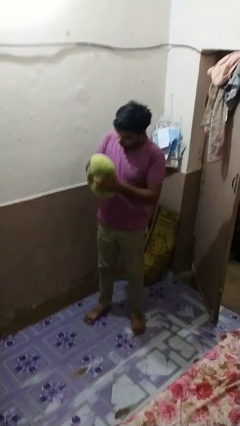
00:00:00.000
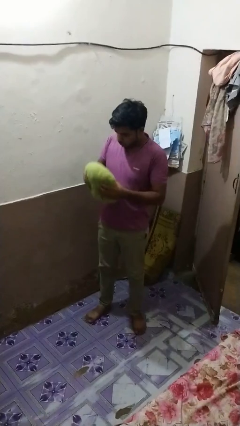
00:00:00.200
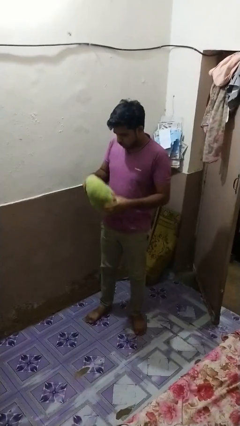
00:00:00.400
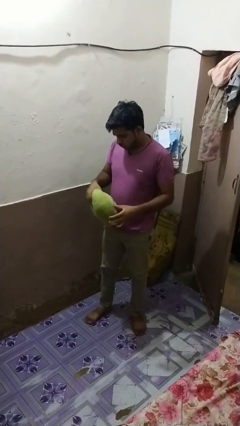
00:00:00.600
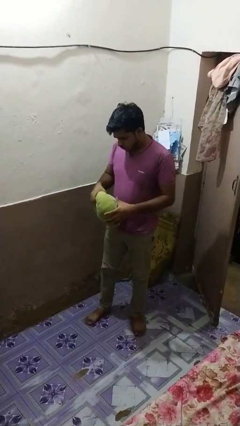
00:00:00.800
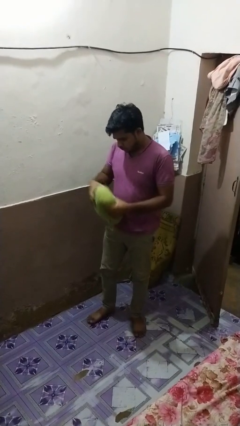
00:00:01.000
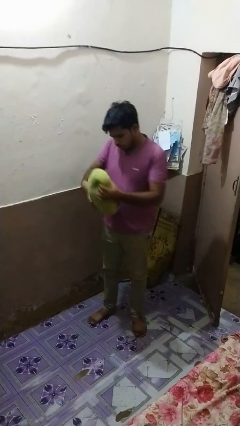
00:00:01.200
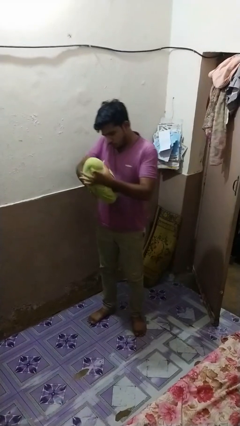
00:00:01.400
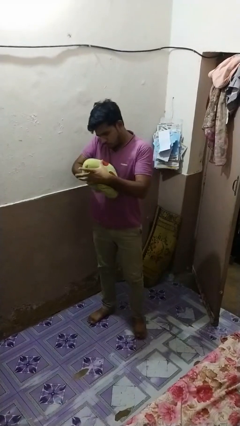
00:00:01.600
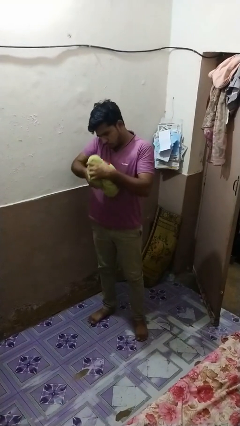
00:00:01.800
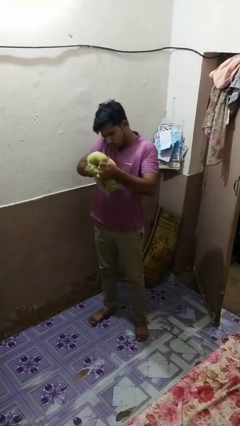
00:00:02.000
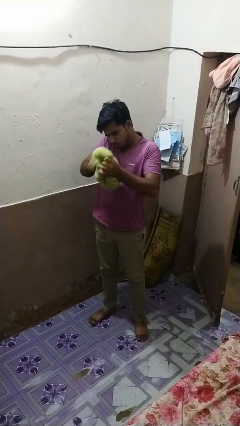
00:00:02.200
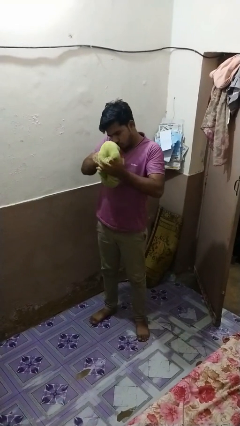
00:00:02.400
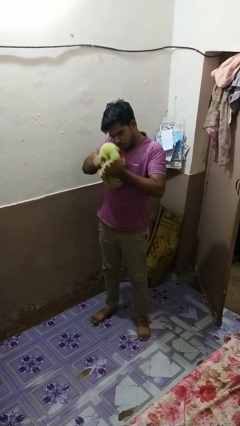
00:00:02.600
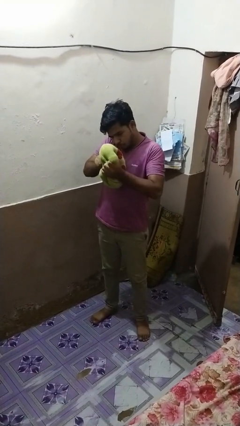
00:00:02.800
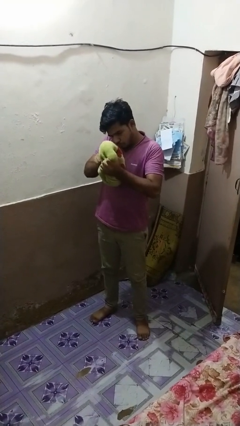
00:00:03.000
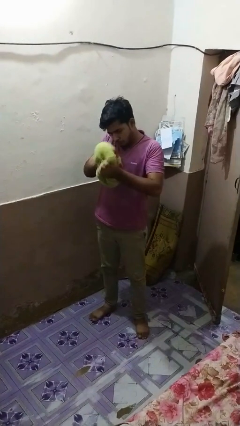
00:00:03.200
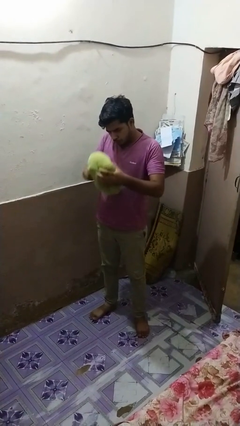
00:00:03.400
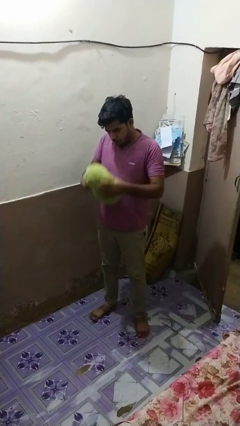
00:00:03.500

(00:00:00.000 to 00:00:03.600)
person squeezes object

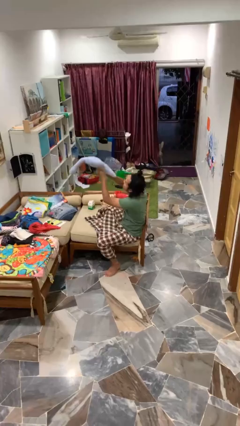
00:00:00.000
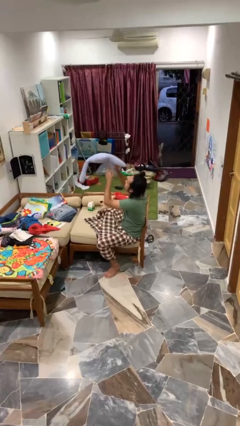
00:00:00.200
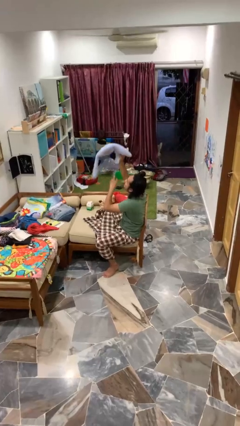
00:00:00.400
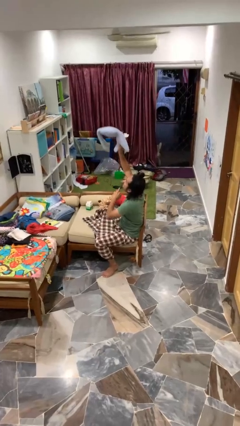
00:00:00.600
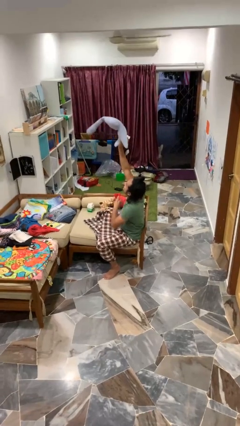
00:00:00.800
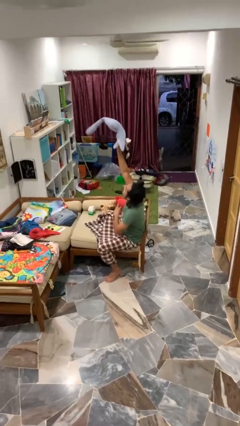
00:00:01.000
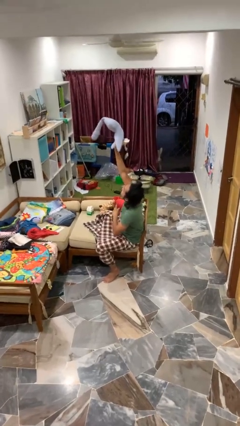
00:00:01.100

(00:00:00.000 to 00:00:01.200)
person picks up object from floor

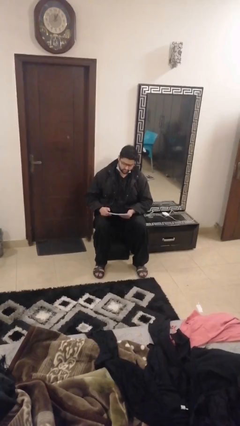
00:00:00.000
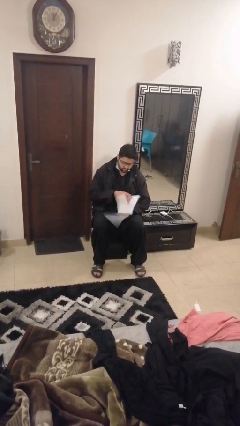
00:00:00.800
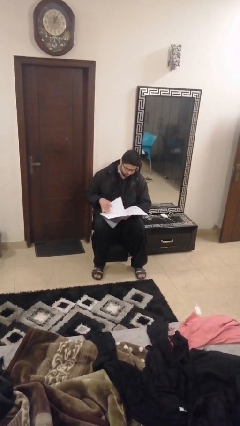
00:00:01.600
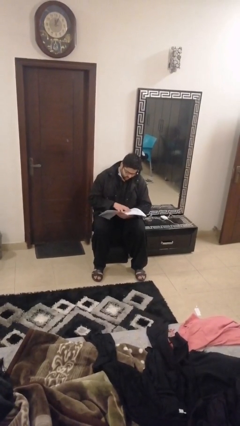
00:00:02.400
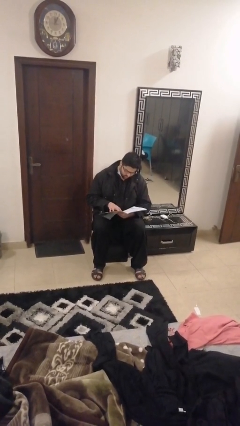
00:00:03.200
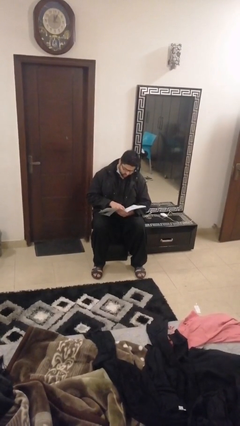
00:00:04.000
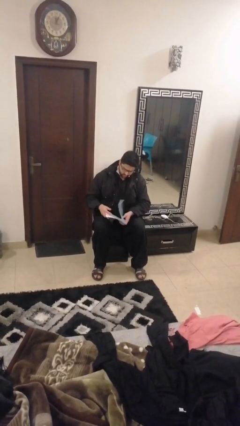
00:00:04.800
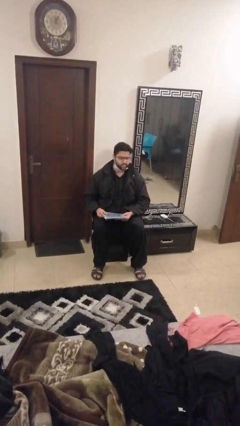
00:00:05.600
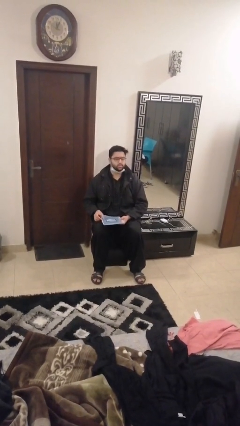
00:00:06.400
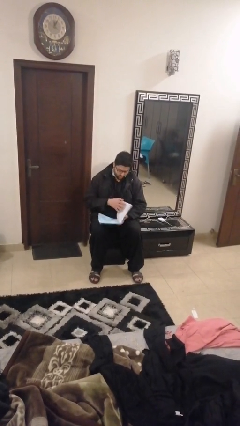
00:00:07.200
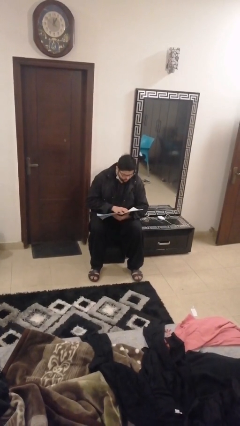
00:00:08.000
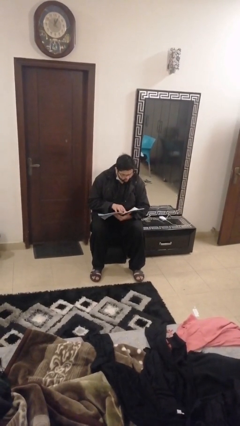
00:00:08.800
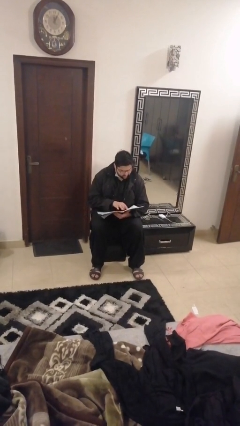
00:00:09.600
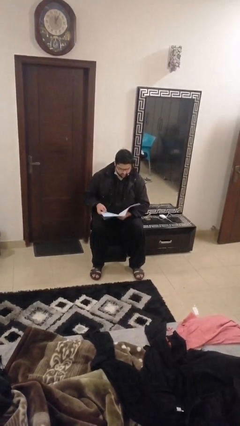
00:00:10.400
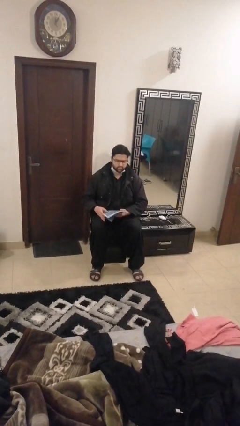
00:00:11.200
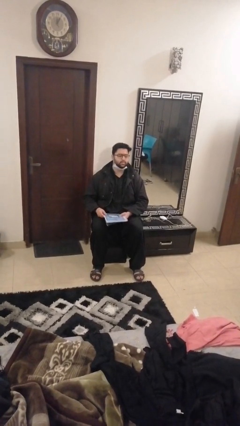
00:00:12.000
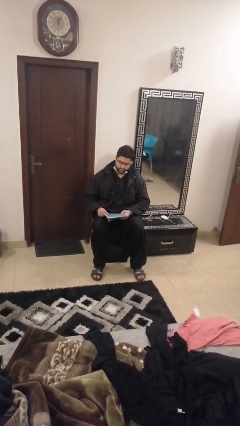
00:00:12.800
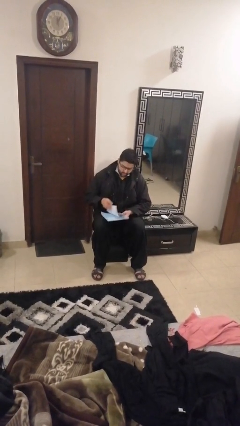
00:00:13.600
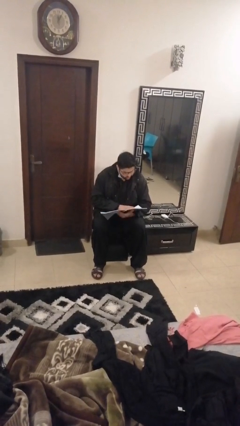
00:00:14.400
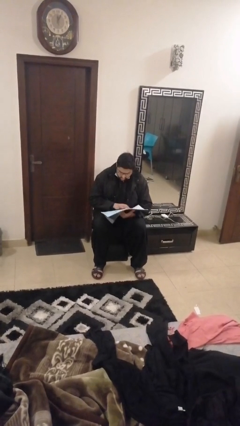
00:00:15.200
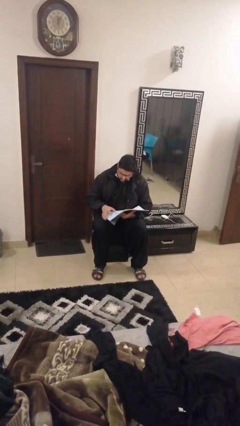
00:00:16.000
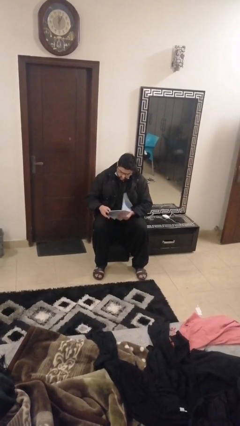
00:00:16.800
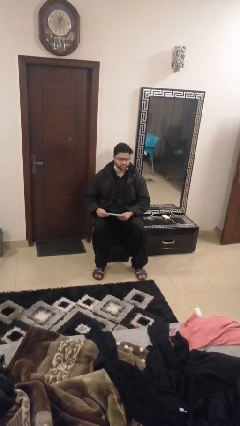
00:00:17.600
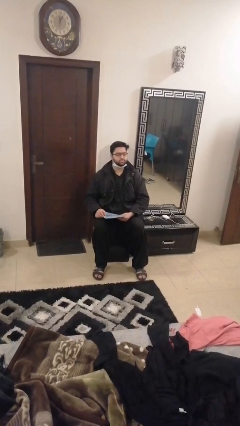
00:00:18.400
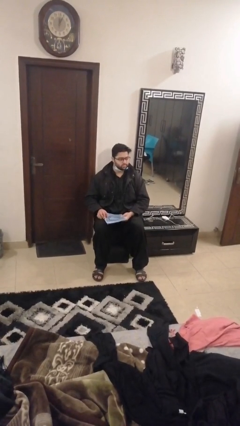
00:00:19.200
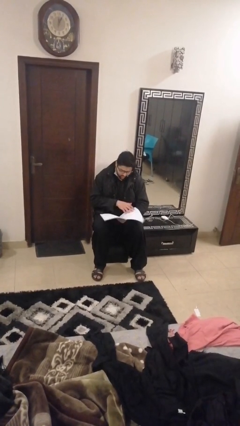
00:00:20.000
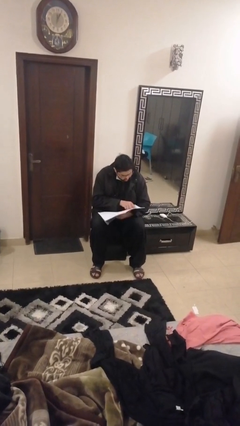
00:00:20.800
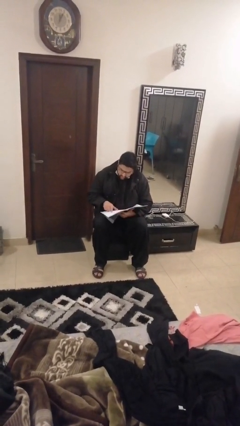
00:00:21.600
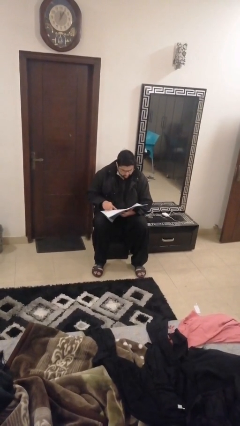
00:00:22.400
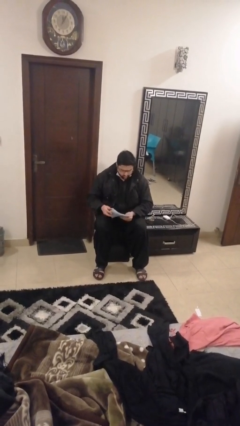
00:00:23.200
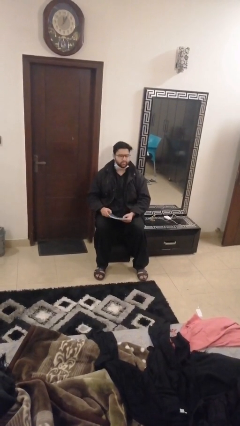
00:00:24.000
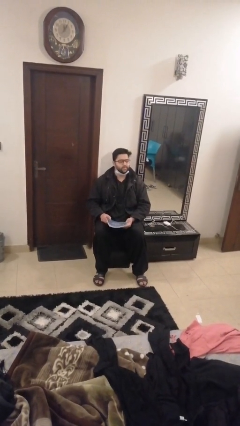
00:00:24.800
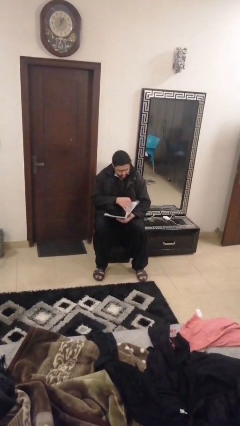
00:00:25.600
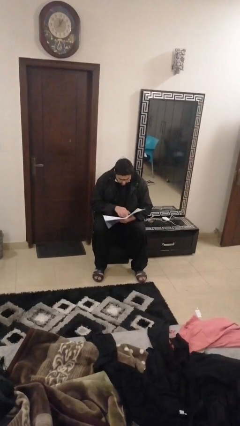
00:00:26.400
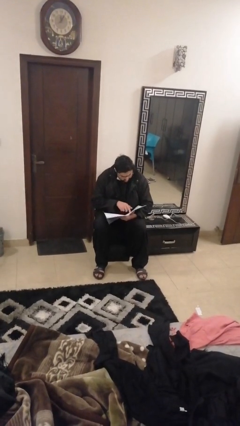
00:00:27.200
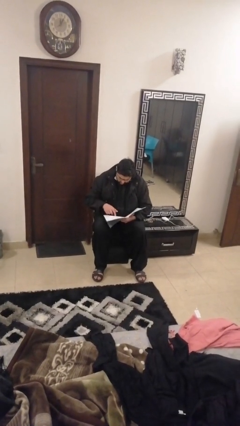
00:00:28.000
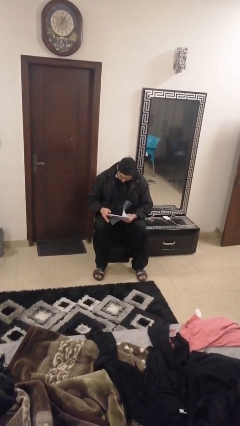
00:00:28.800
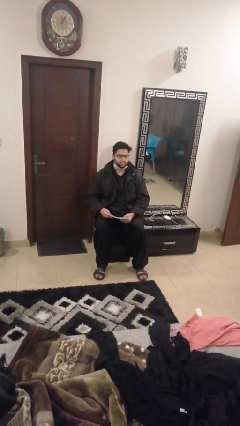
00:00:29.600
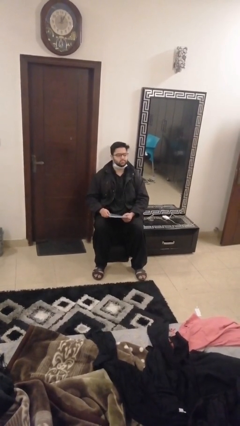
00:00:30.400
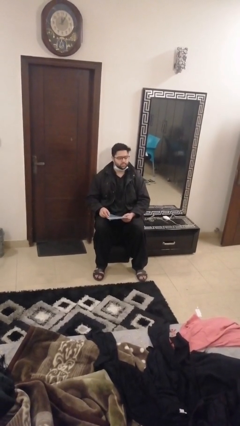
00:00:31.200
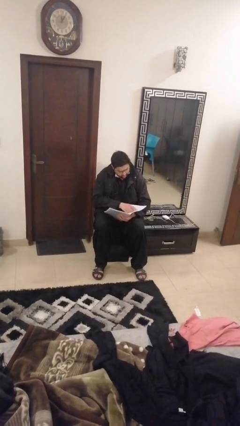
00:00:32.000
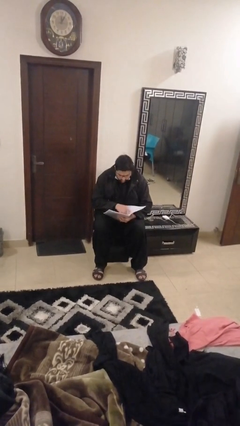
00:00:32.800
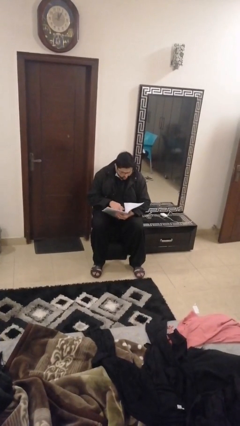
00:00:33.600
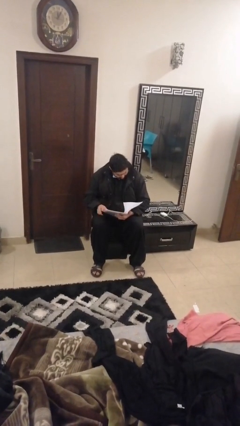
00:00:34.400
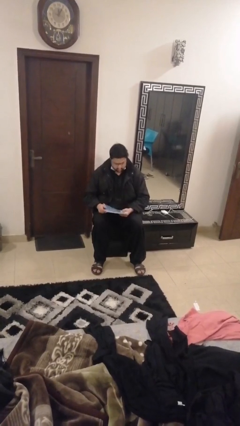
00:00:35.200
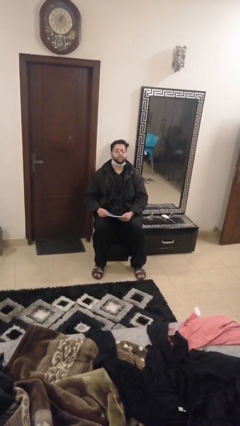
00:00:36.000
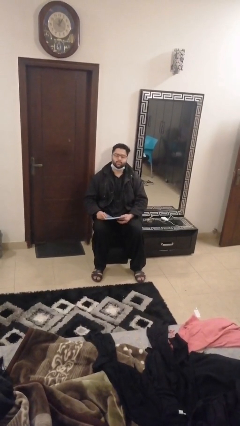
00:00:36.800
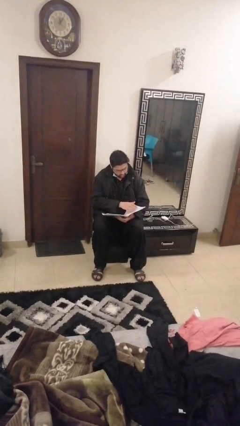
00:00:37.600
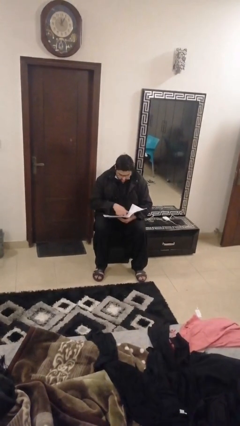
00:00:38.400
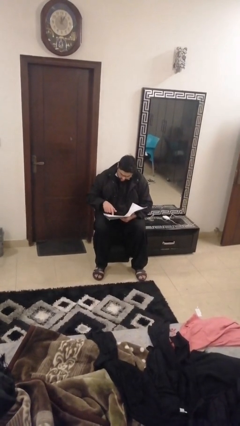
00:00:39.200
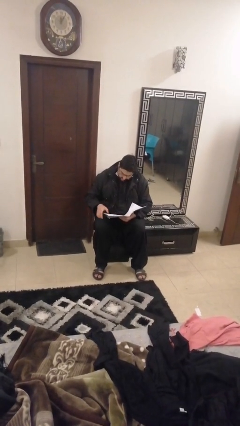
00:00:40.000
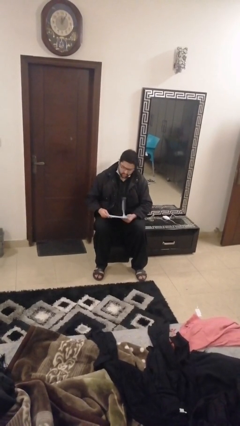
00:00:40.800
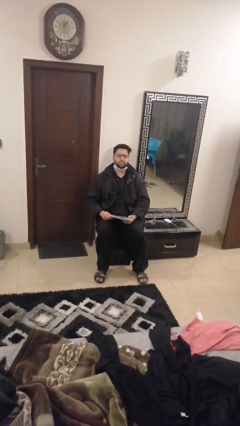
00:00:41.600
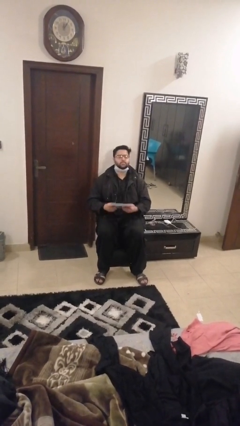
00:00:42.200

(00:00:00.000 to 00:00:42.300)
person reads document

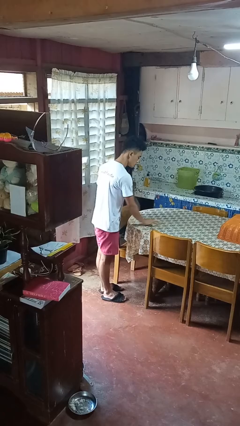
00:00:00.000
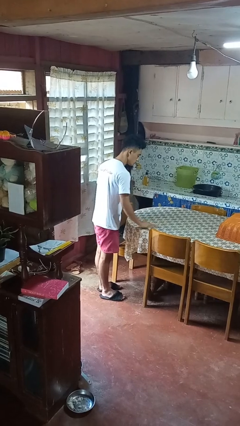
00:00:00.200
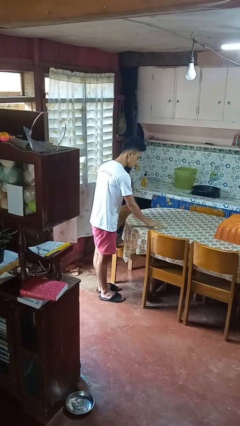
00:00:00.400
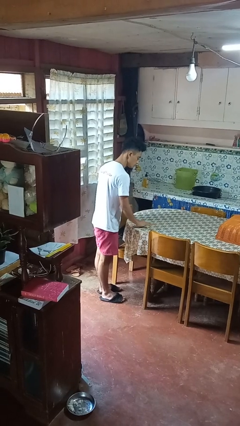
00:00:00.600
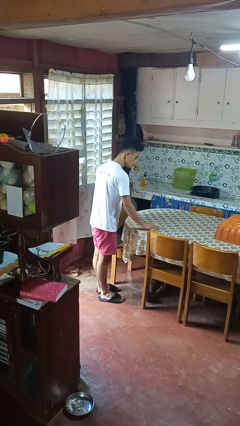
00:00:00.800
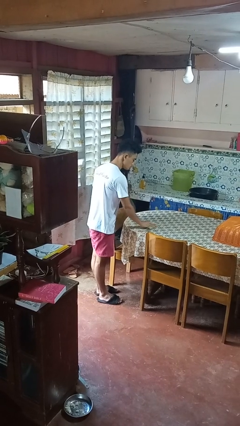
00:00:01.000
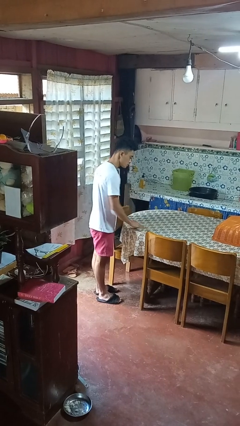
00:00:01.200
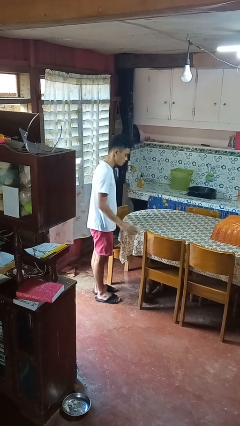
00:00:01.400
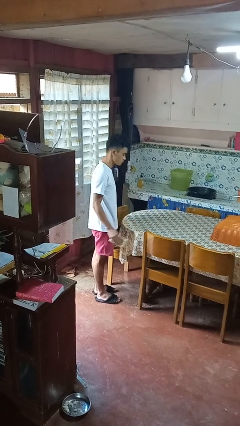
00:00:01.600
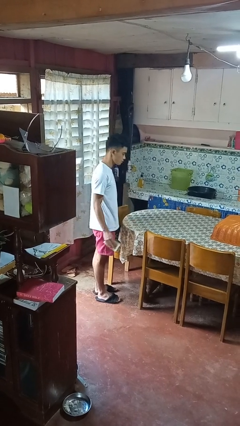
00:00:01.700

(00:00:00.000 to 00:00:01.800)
person cleans table with rag

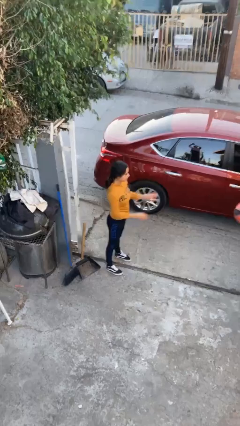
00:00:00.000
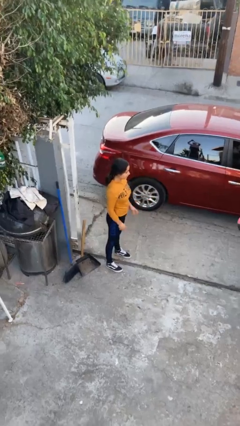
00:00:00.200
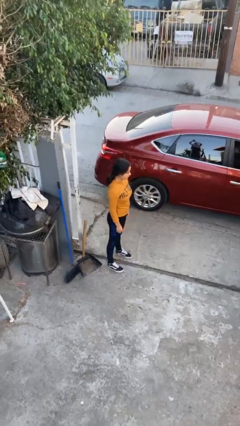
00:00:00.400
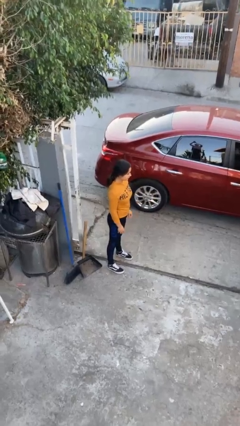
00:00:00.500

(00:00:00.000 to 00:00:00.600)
person throws object to person
